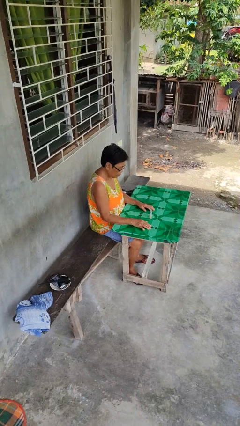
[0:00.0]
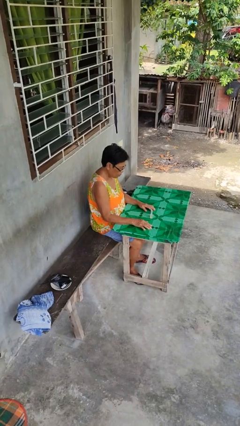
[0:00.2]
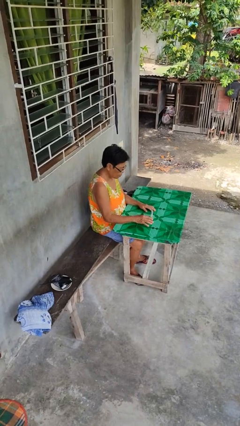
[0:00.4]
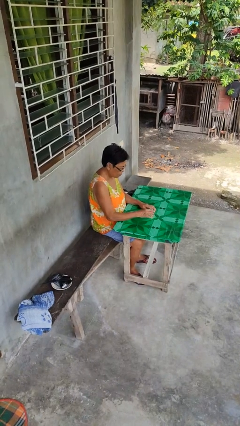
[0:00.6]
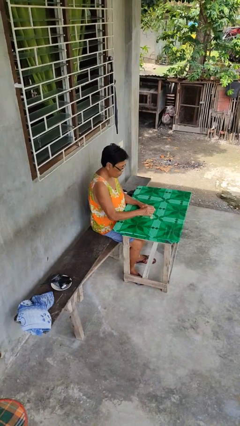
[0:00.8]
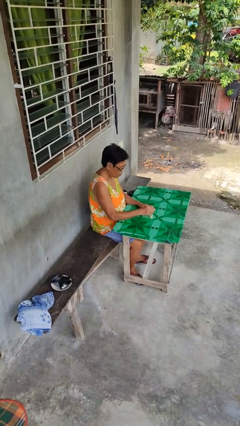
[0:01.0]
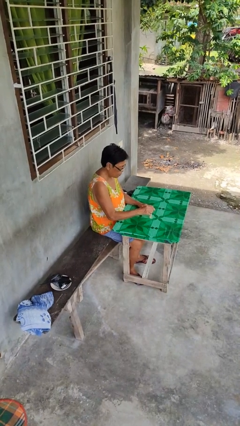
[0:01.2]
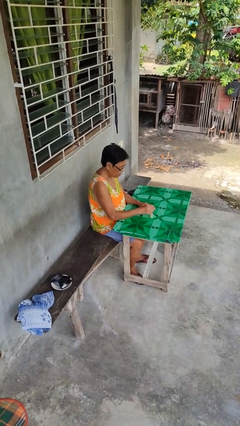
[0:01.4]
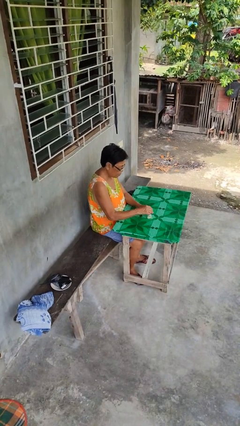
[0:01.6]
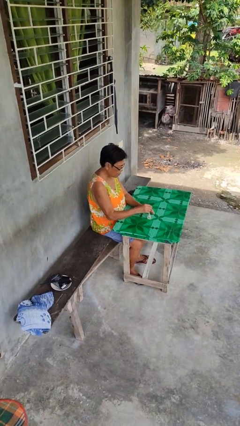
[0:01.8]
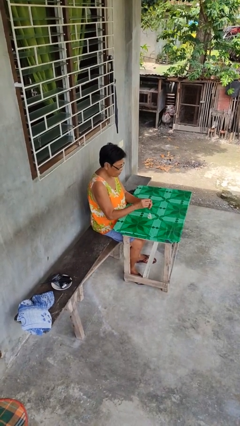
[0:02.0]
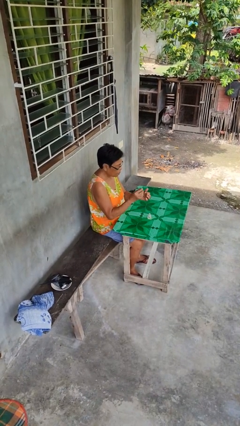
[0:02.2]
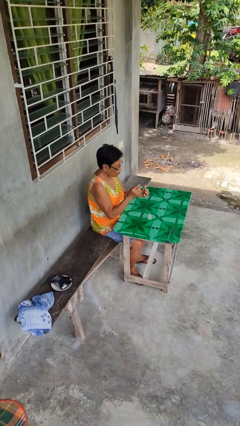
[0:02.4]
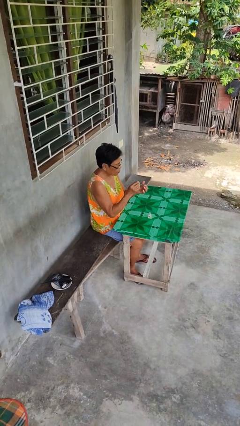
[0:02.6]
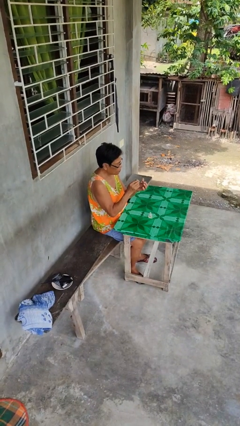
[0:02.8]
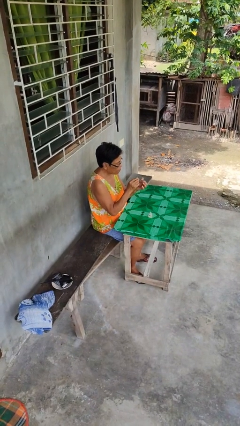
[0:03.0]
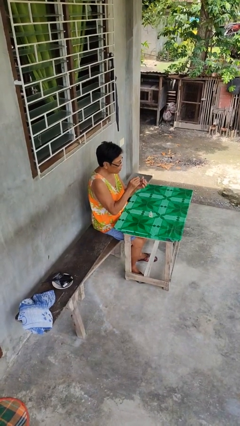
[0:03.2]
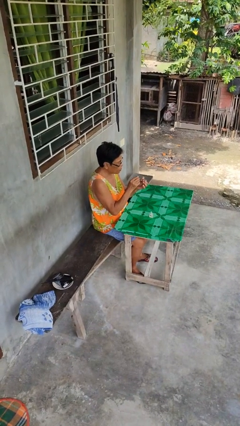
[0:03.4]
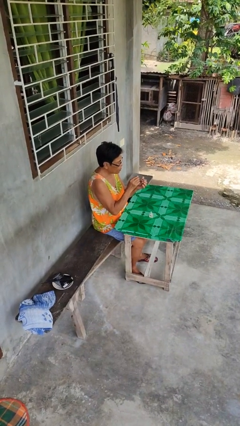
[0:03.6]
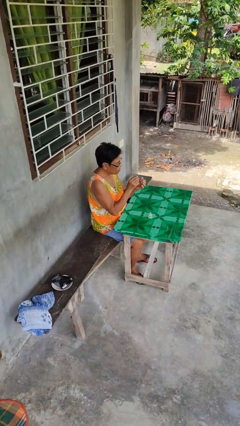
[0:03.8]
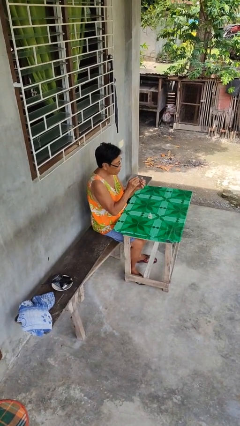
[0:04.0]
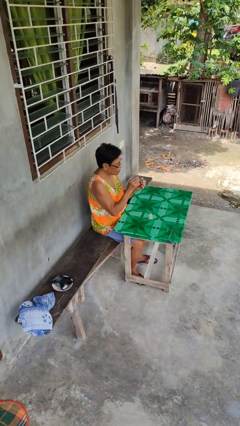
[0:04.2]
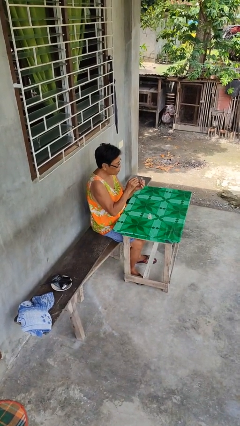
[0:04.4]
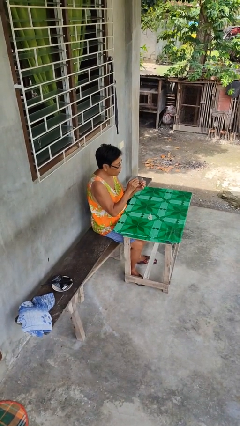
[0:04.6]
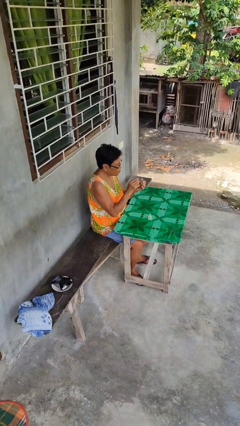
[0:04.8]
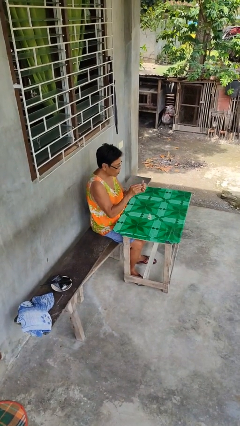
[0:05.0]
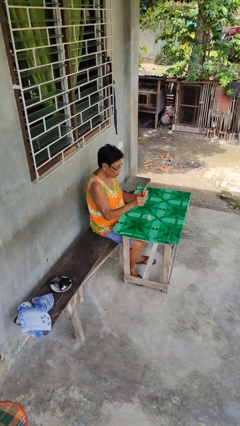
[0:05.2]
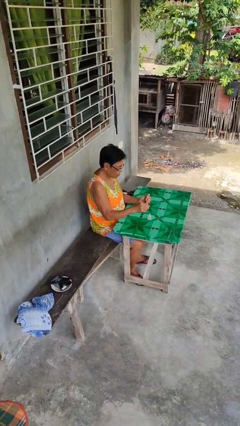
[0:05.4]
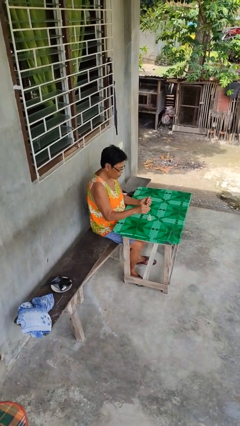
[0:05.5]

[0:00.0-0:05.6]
person paints fingernails

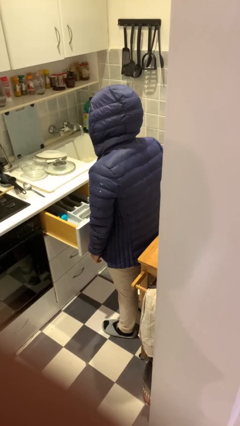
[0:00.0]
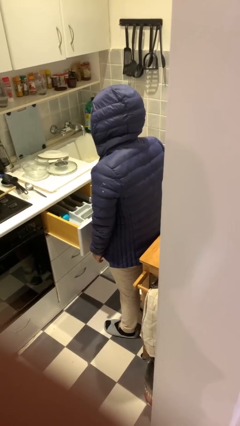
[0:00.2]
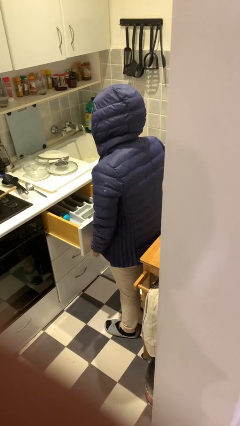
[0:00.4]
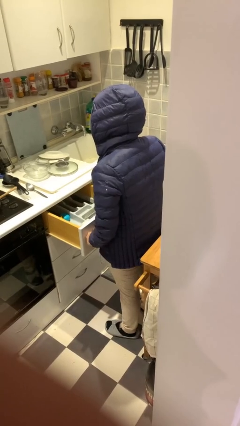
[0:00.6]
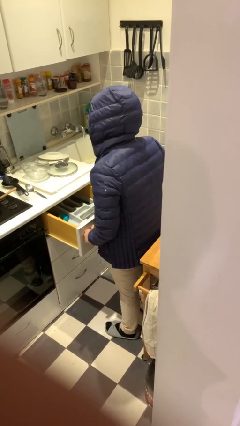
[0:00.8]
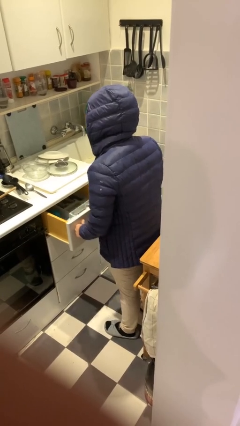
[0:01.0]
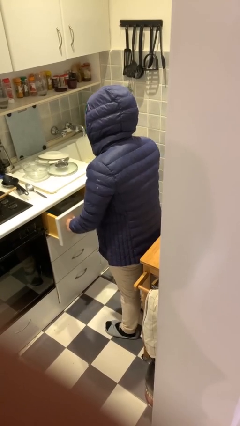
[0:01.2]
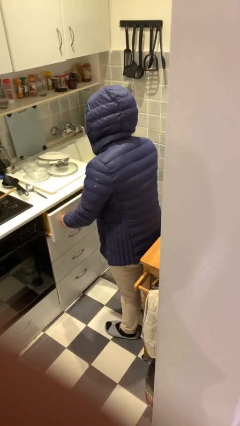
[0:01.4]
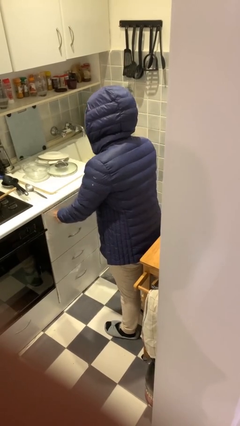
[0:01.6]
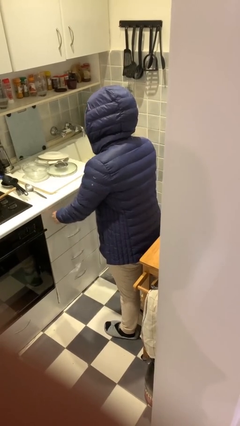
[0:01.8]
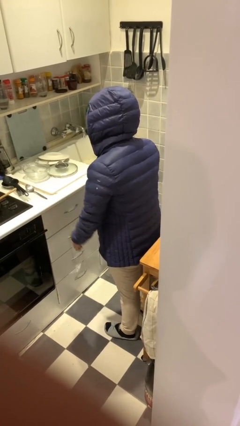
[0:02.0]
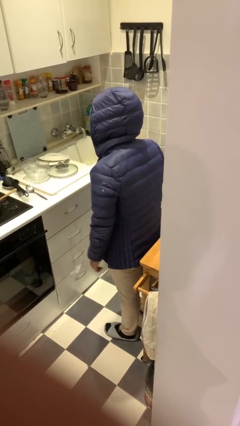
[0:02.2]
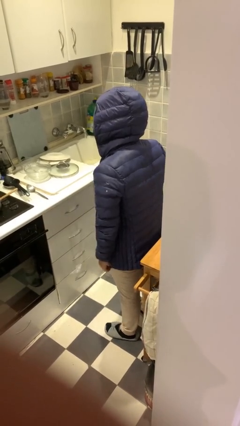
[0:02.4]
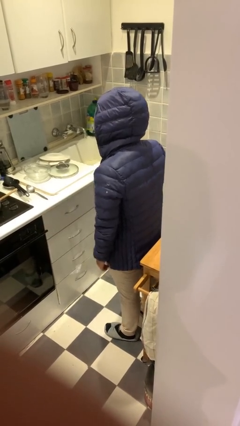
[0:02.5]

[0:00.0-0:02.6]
person closes kitchen drawer

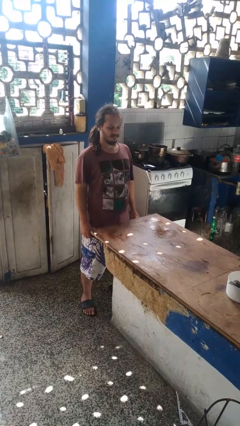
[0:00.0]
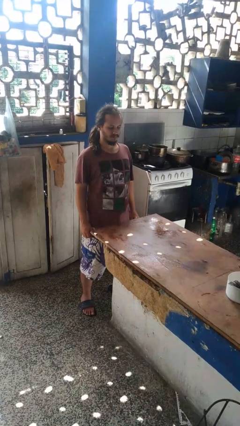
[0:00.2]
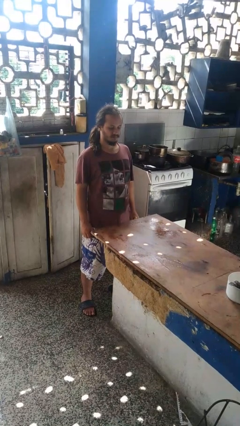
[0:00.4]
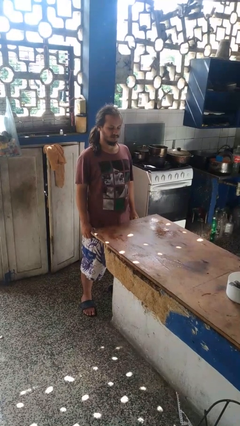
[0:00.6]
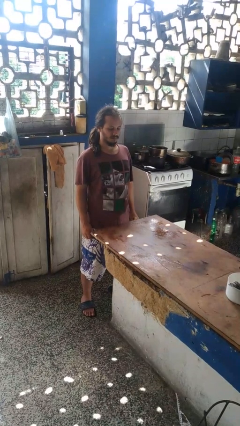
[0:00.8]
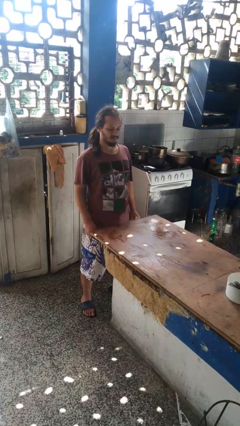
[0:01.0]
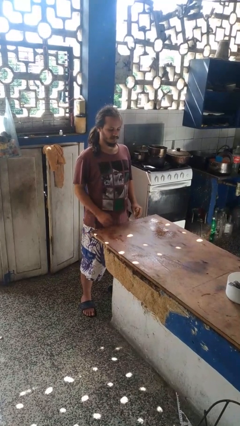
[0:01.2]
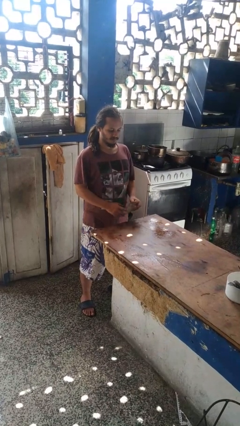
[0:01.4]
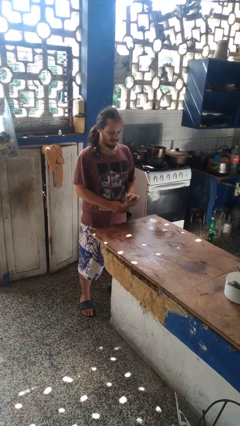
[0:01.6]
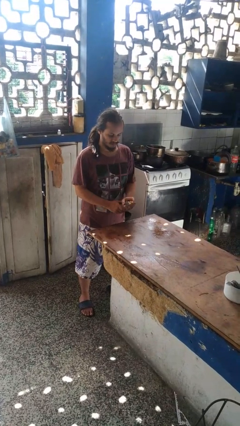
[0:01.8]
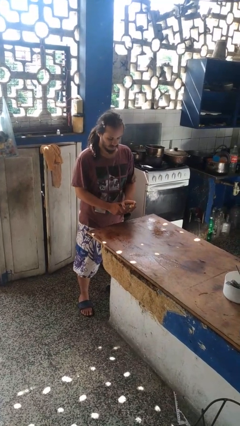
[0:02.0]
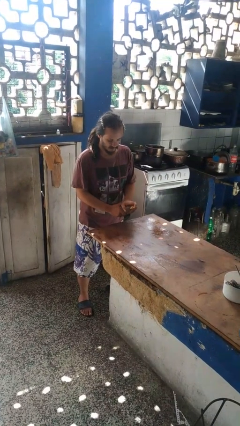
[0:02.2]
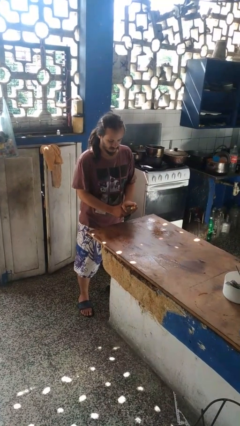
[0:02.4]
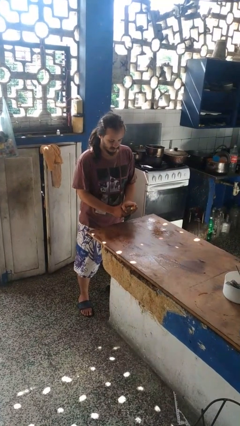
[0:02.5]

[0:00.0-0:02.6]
person sprays from bottle

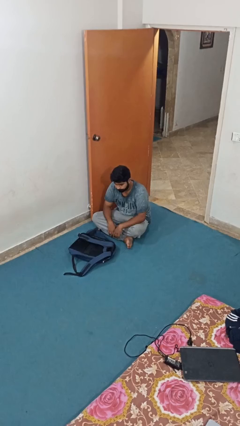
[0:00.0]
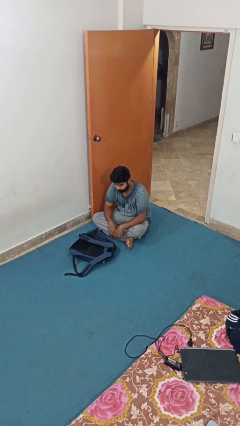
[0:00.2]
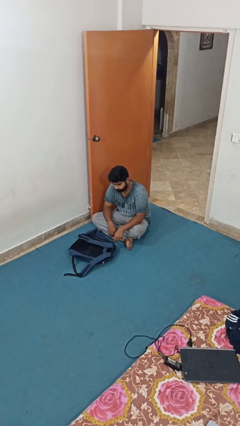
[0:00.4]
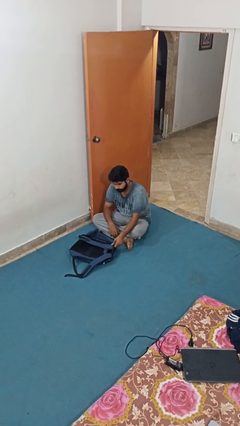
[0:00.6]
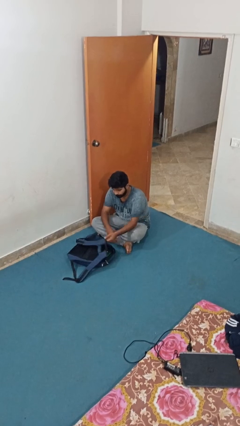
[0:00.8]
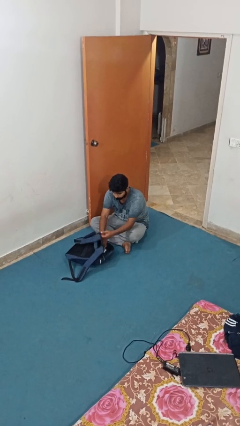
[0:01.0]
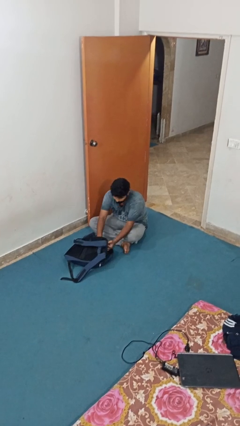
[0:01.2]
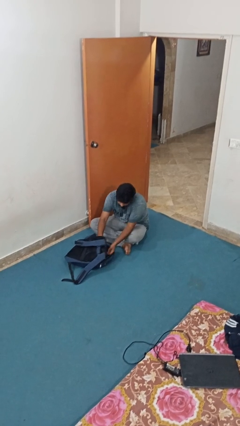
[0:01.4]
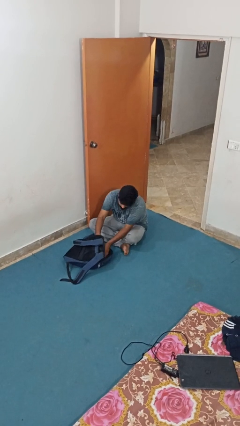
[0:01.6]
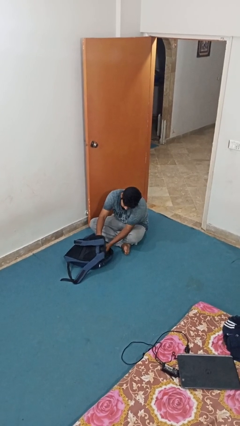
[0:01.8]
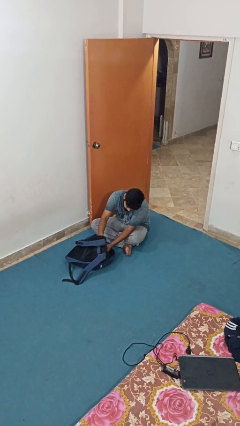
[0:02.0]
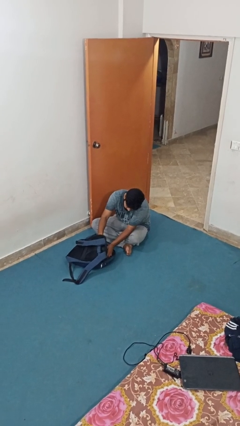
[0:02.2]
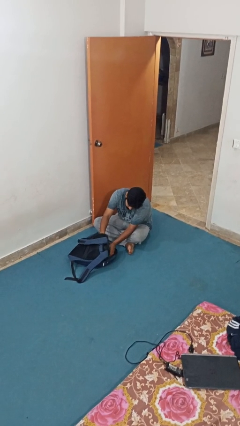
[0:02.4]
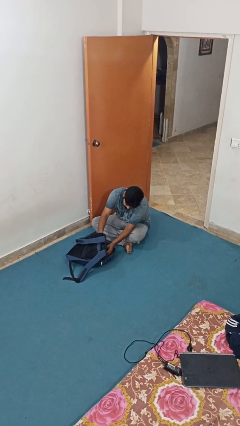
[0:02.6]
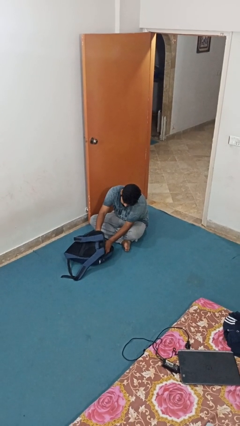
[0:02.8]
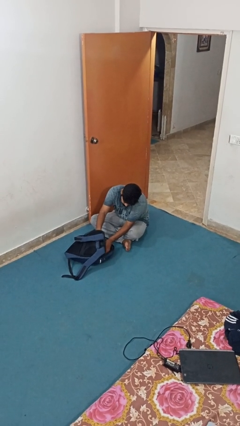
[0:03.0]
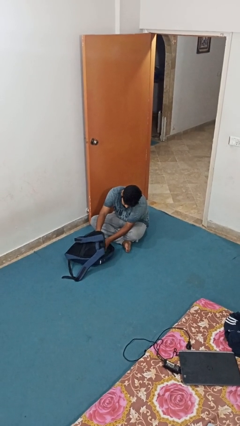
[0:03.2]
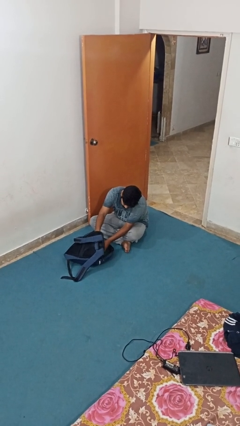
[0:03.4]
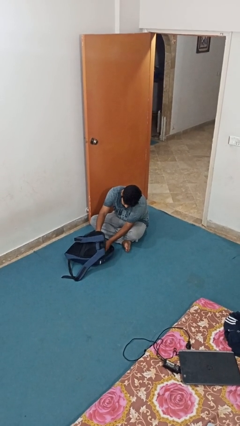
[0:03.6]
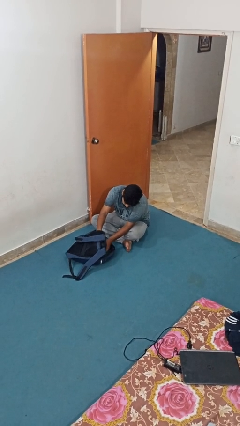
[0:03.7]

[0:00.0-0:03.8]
person searches in backpack

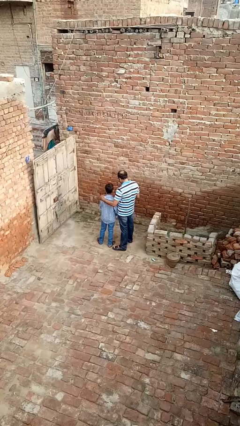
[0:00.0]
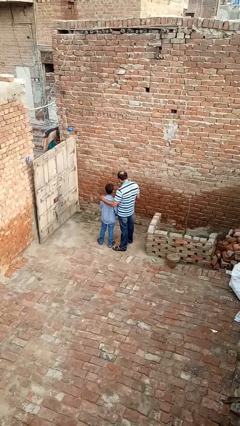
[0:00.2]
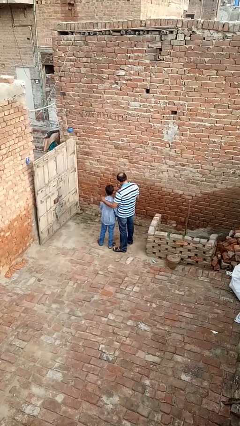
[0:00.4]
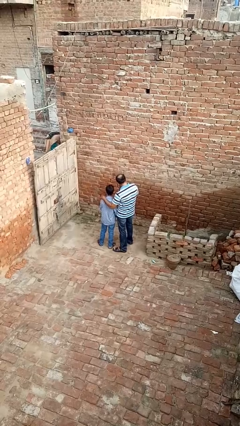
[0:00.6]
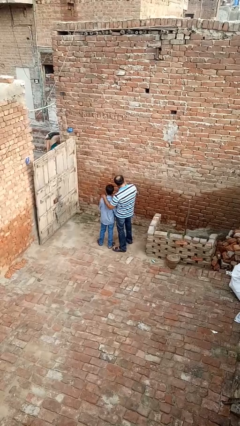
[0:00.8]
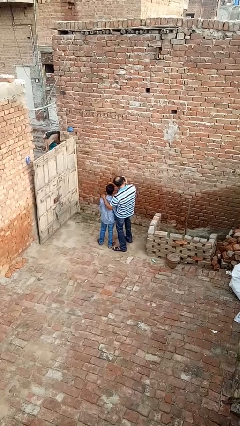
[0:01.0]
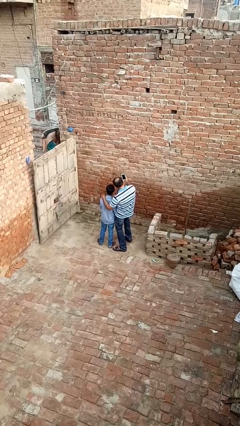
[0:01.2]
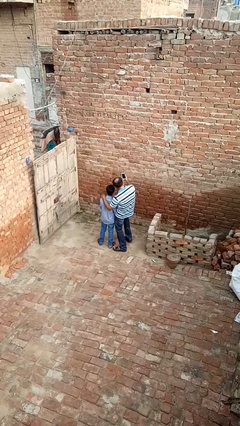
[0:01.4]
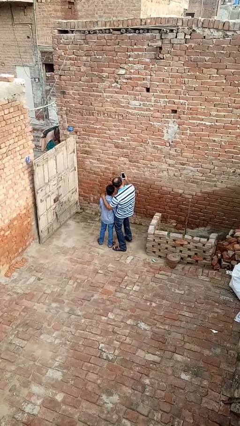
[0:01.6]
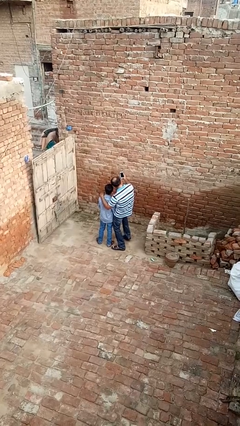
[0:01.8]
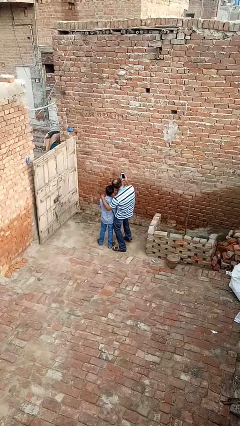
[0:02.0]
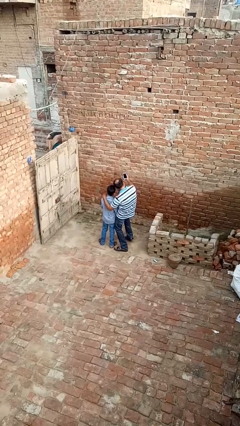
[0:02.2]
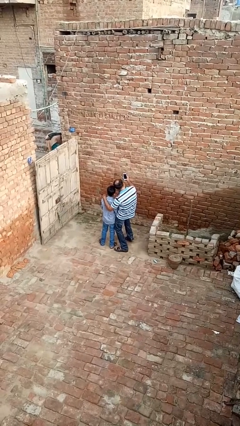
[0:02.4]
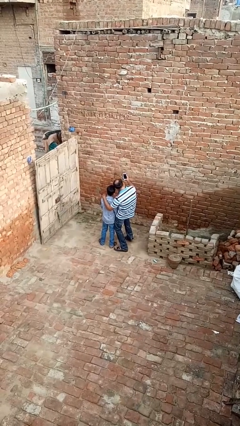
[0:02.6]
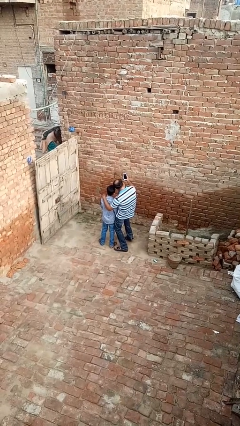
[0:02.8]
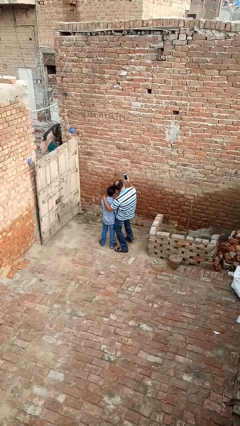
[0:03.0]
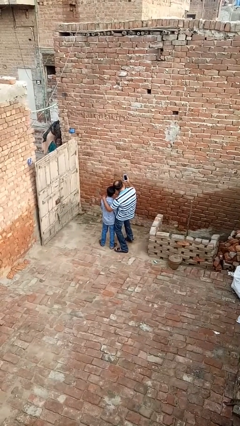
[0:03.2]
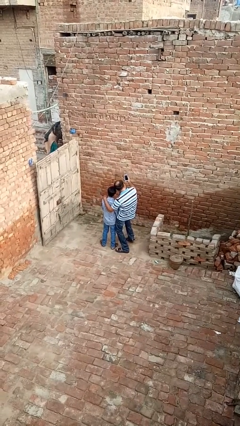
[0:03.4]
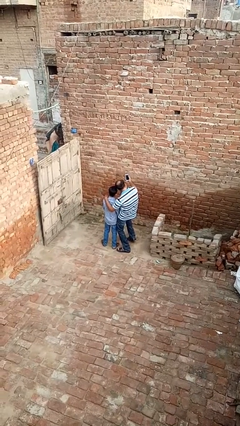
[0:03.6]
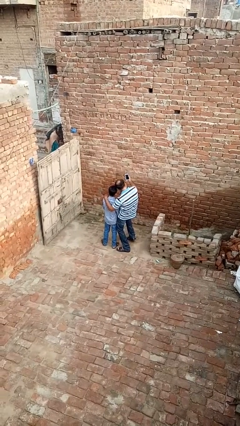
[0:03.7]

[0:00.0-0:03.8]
person takes selfie with person
